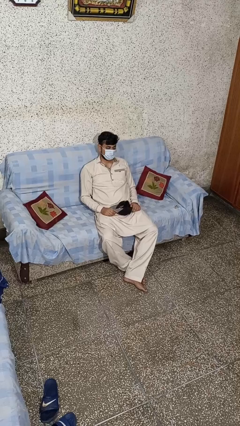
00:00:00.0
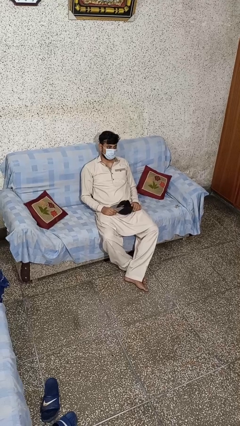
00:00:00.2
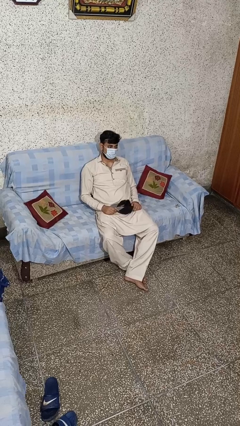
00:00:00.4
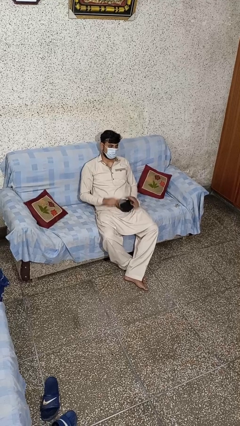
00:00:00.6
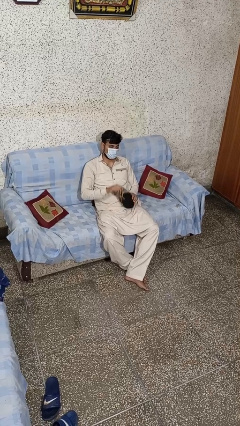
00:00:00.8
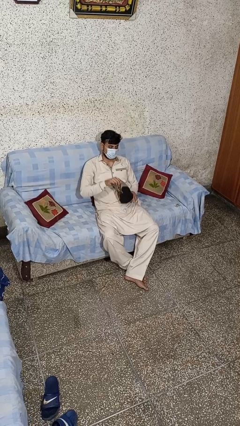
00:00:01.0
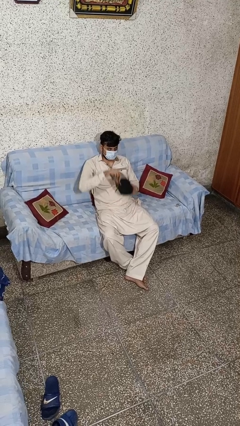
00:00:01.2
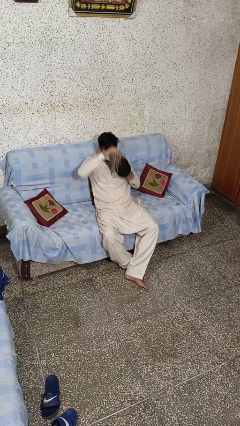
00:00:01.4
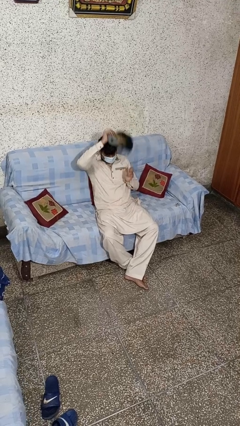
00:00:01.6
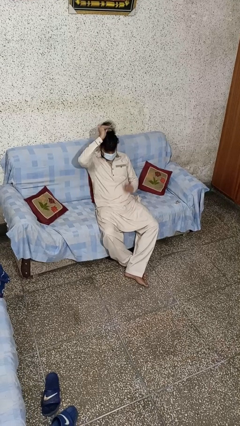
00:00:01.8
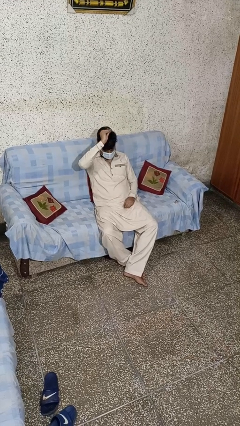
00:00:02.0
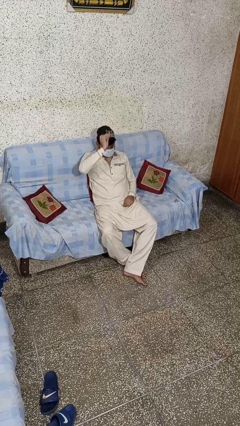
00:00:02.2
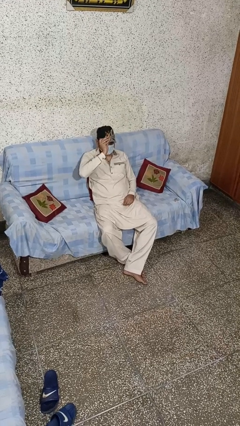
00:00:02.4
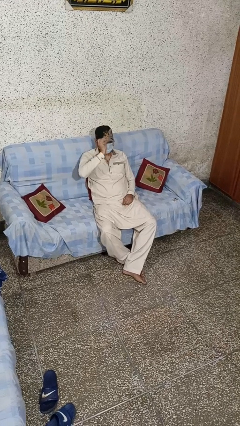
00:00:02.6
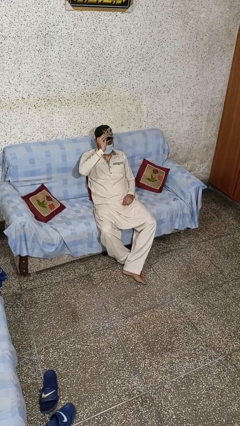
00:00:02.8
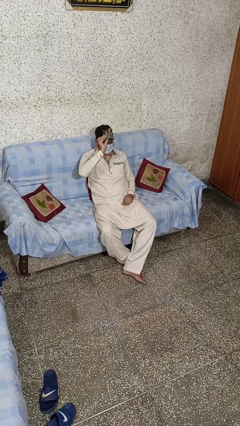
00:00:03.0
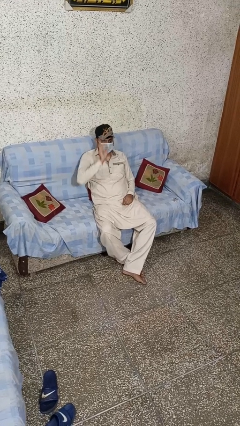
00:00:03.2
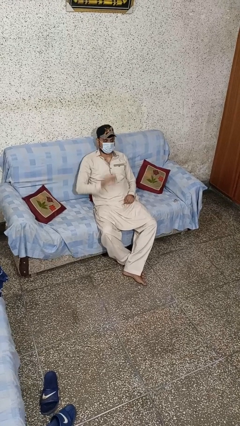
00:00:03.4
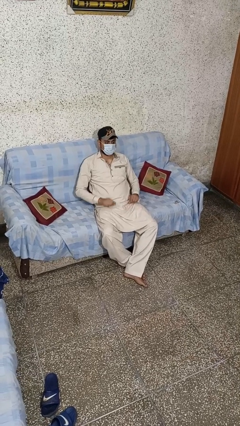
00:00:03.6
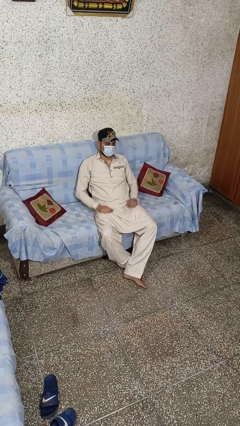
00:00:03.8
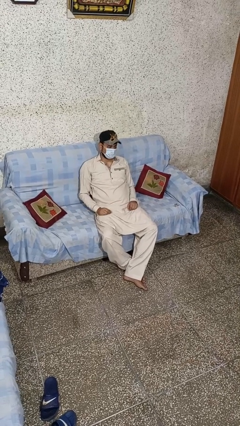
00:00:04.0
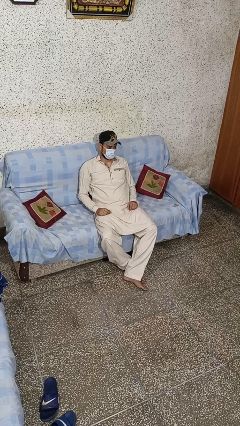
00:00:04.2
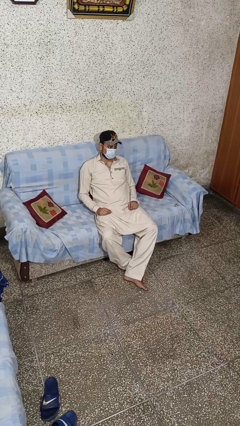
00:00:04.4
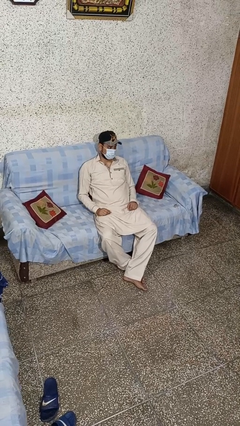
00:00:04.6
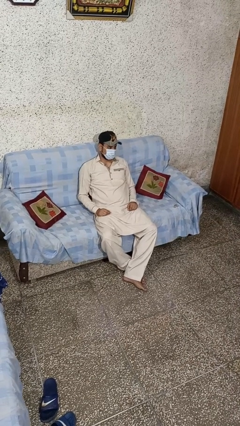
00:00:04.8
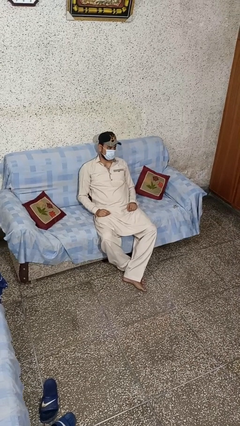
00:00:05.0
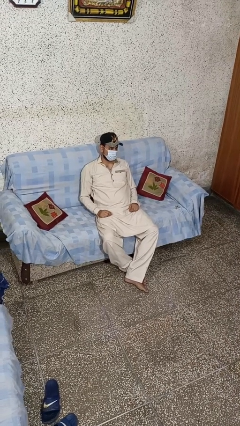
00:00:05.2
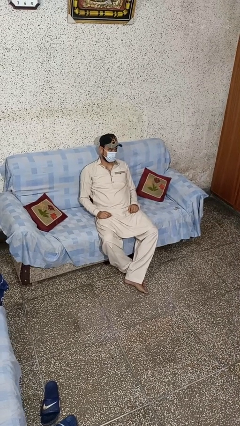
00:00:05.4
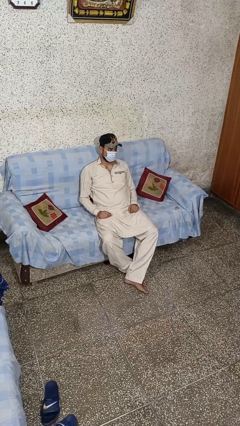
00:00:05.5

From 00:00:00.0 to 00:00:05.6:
person puts on hat

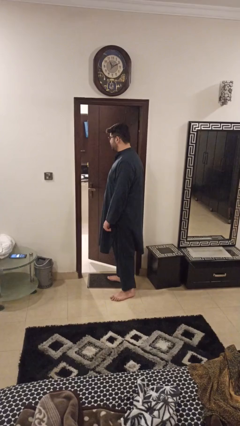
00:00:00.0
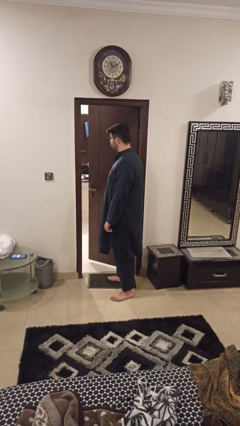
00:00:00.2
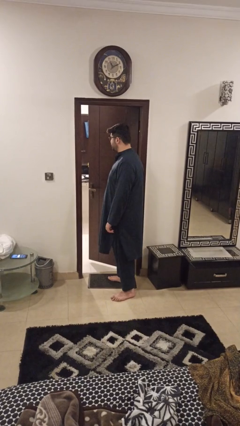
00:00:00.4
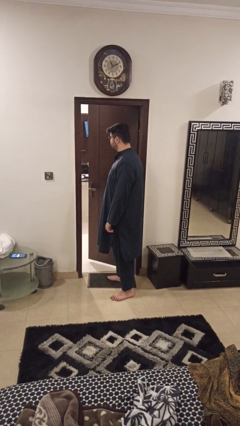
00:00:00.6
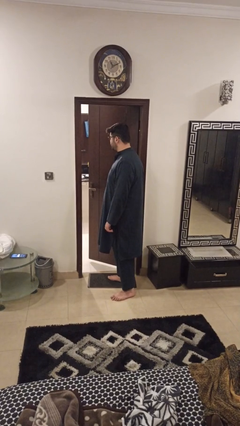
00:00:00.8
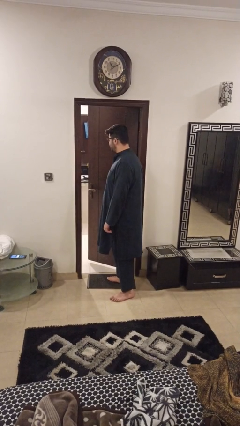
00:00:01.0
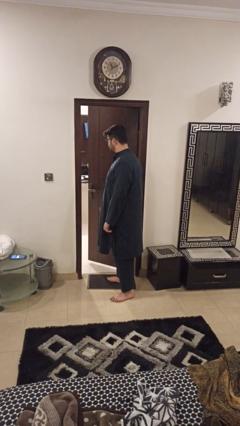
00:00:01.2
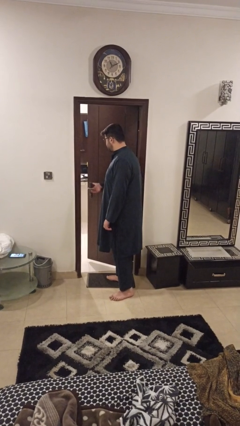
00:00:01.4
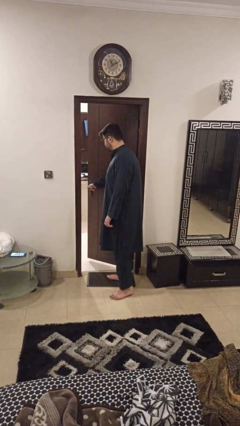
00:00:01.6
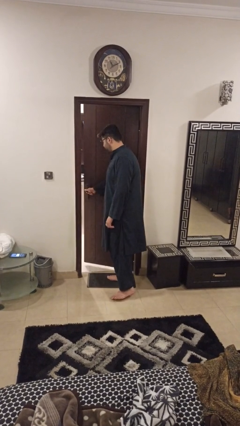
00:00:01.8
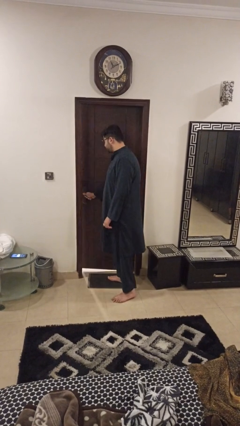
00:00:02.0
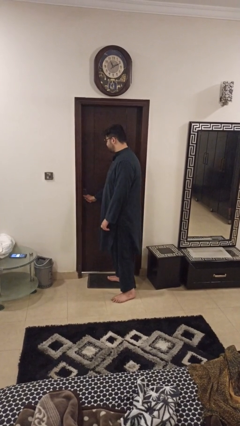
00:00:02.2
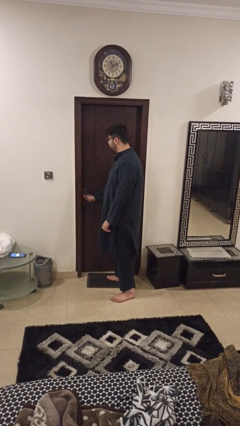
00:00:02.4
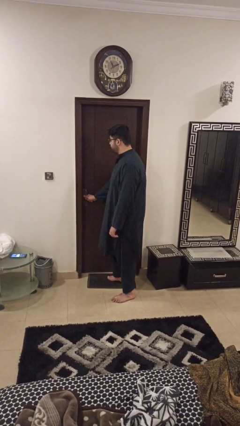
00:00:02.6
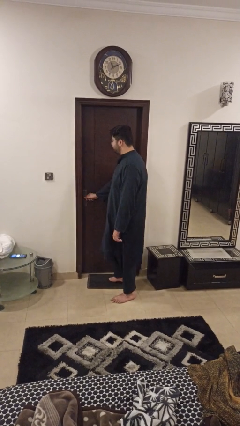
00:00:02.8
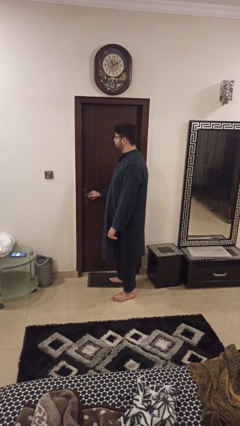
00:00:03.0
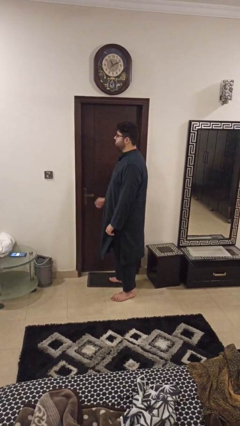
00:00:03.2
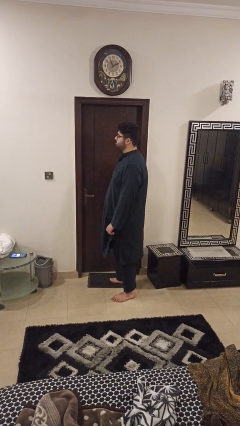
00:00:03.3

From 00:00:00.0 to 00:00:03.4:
person closes facility door

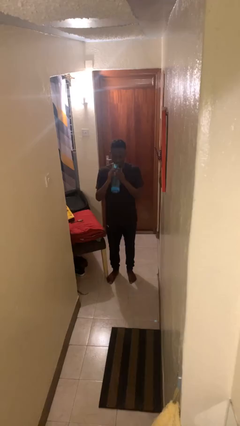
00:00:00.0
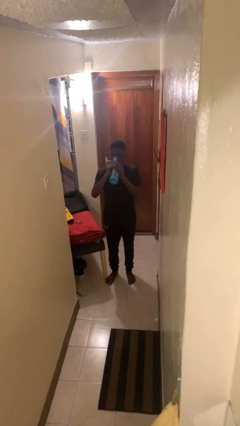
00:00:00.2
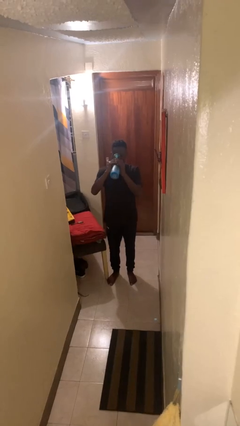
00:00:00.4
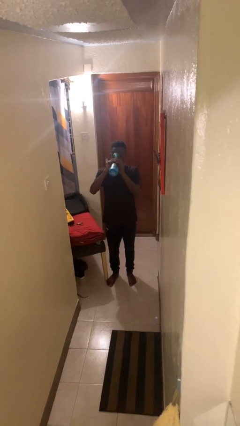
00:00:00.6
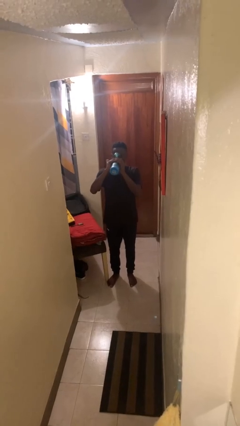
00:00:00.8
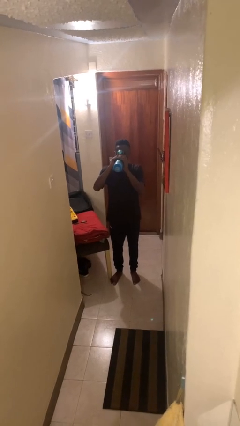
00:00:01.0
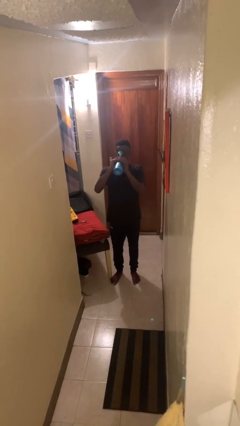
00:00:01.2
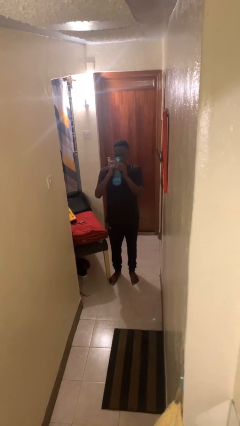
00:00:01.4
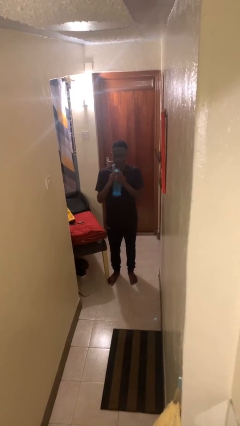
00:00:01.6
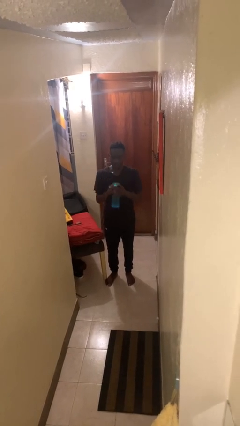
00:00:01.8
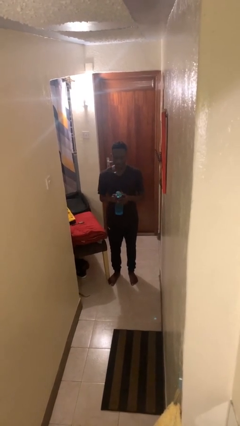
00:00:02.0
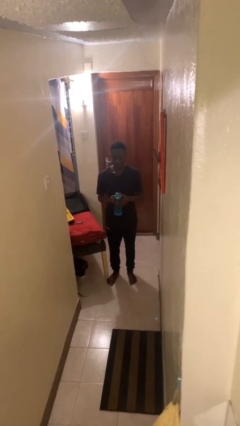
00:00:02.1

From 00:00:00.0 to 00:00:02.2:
person drinks from bottle

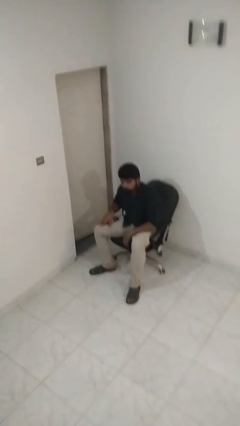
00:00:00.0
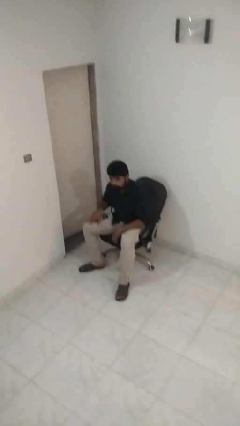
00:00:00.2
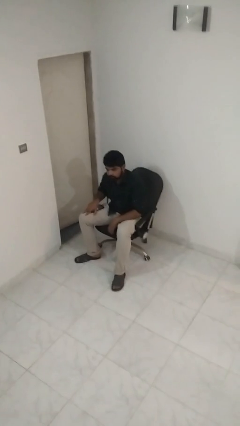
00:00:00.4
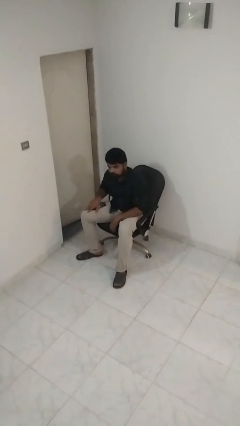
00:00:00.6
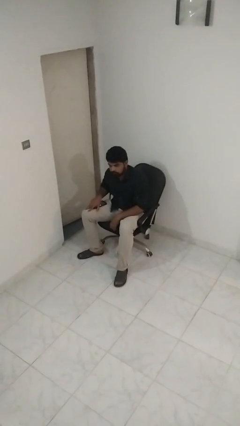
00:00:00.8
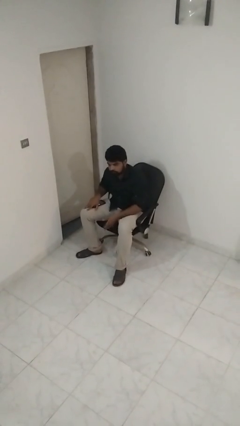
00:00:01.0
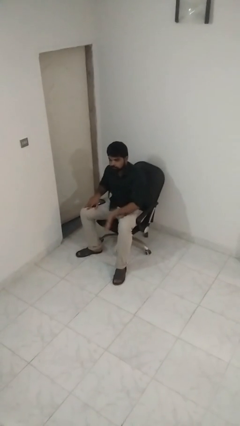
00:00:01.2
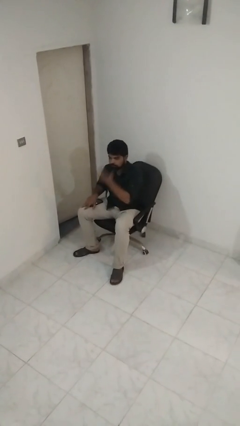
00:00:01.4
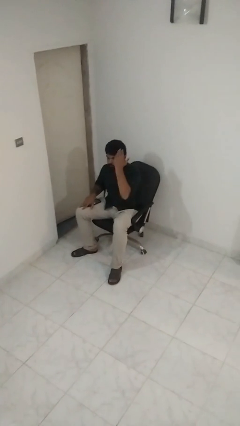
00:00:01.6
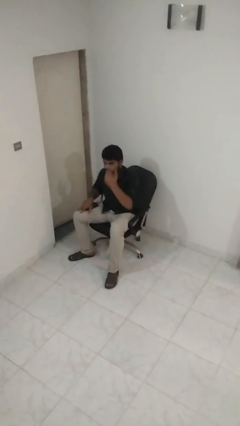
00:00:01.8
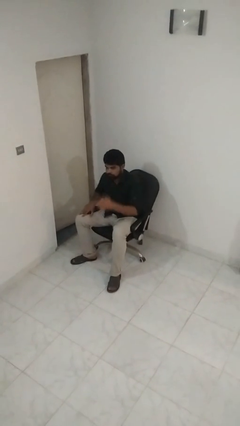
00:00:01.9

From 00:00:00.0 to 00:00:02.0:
person gestures swipe up

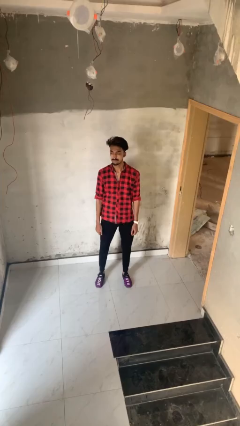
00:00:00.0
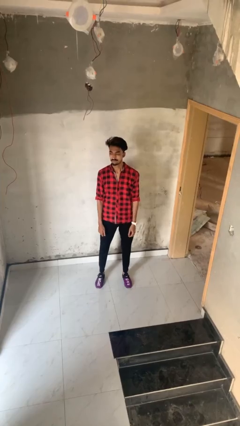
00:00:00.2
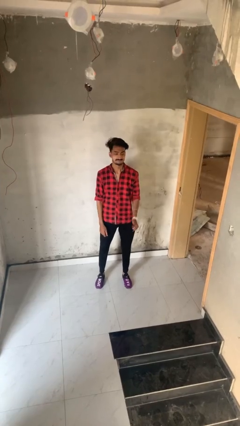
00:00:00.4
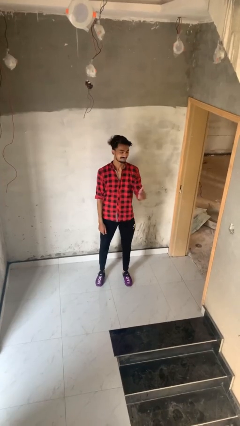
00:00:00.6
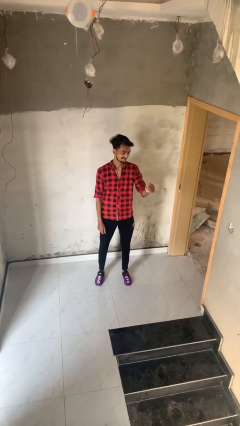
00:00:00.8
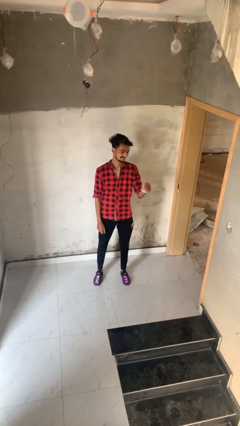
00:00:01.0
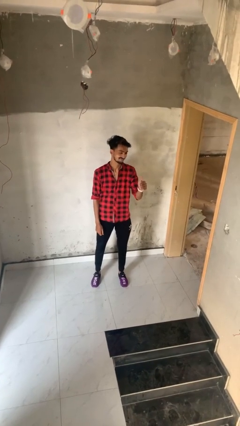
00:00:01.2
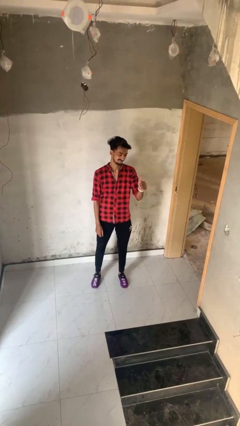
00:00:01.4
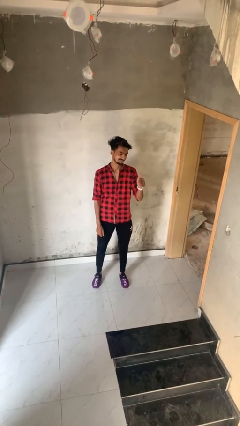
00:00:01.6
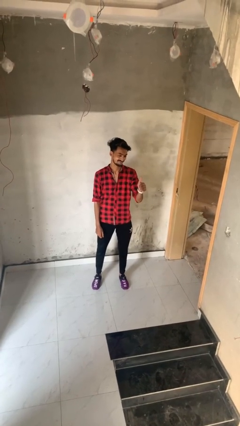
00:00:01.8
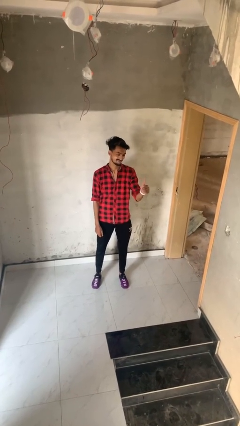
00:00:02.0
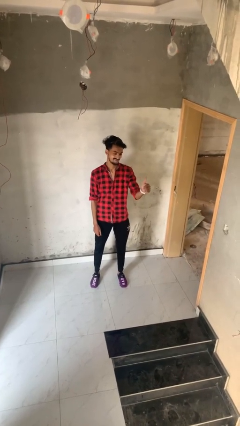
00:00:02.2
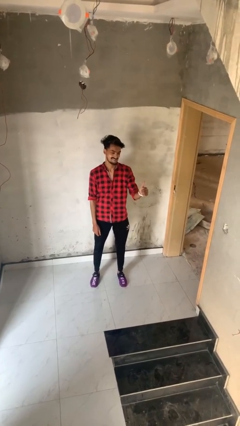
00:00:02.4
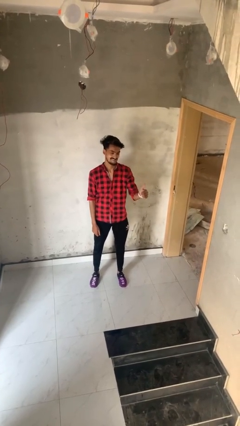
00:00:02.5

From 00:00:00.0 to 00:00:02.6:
person gestures thumbs up

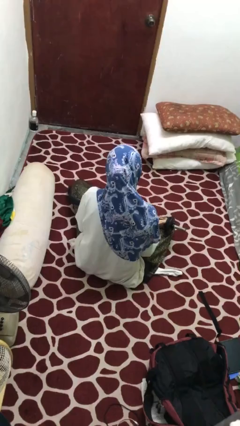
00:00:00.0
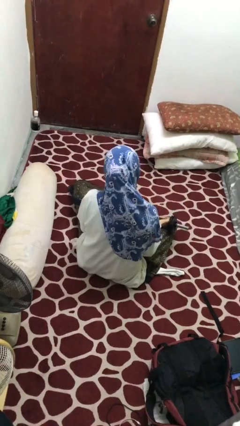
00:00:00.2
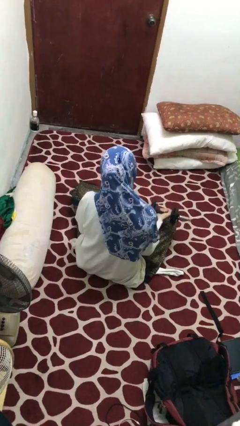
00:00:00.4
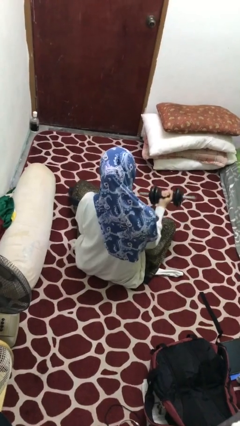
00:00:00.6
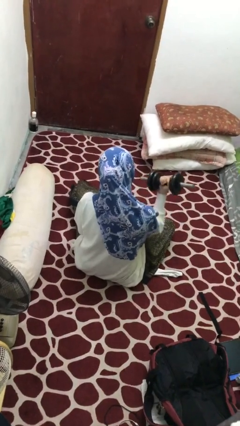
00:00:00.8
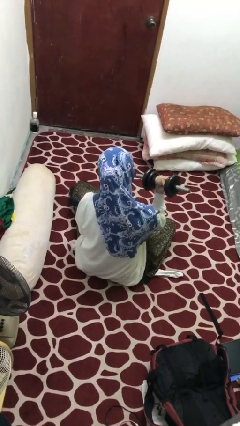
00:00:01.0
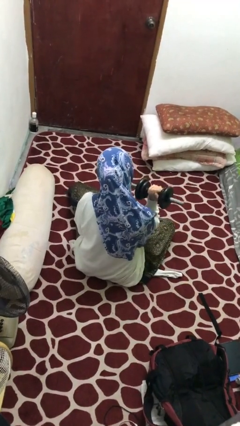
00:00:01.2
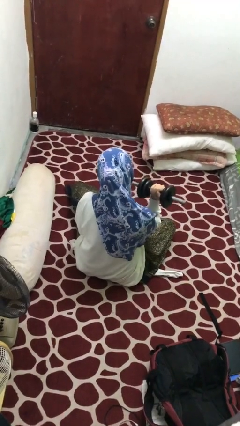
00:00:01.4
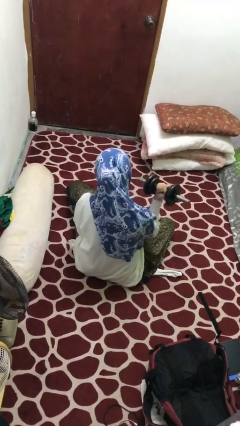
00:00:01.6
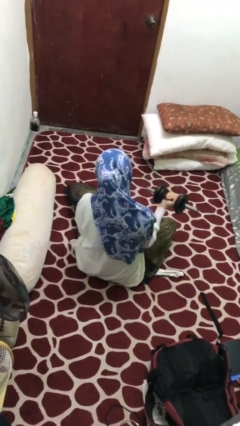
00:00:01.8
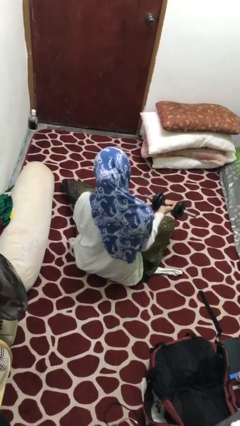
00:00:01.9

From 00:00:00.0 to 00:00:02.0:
person lifts dumbbells
